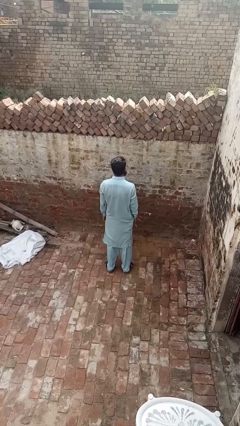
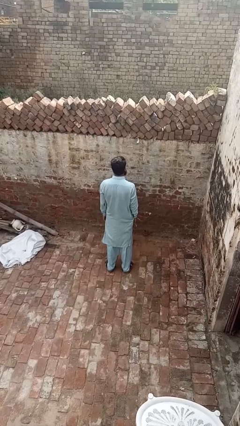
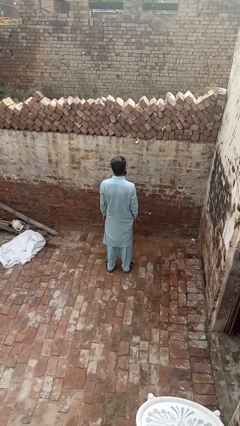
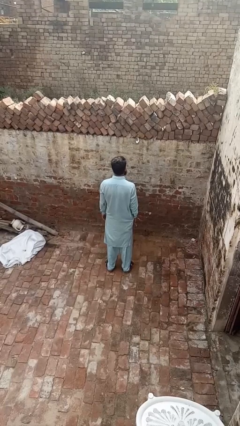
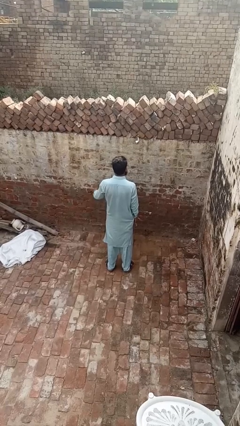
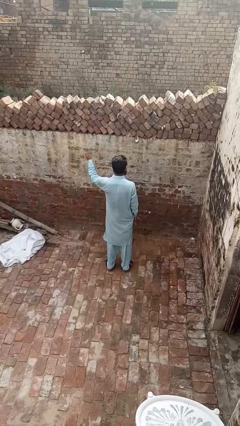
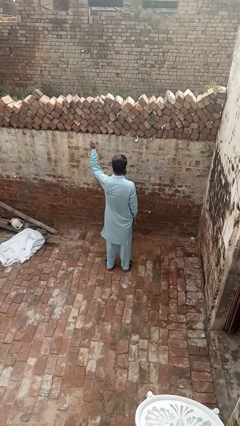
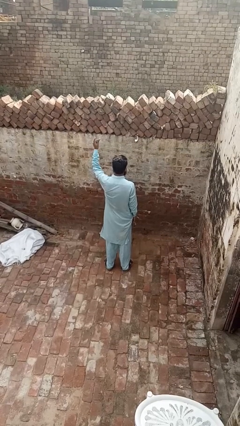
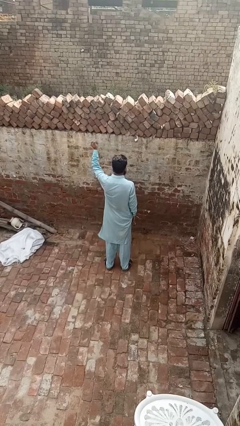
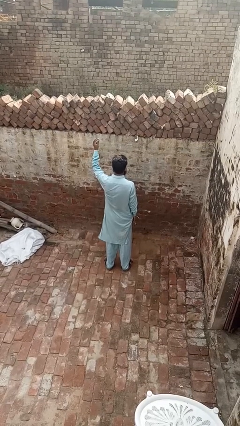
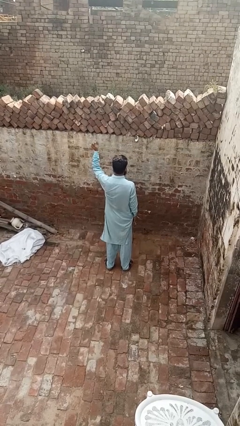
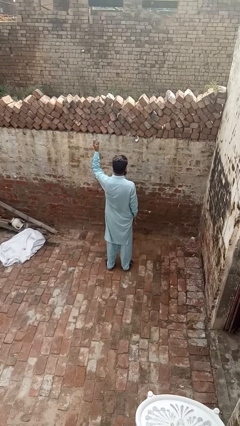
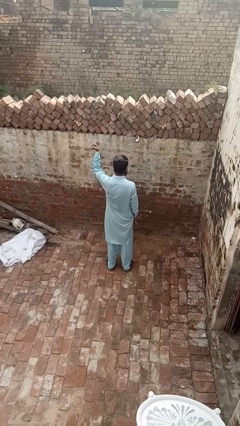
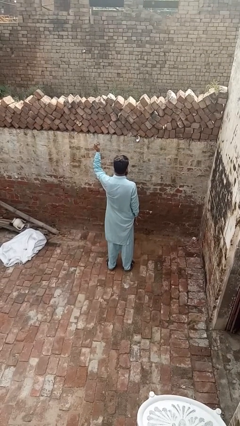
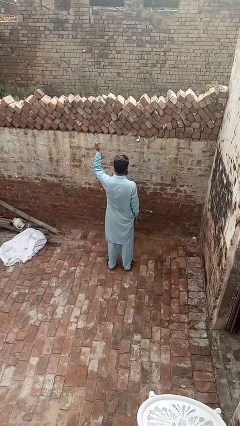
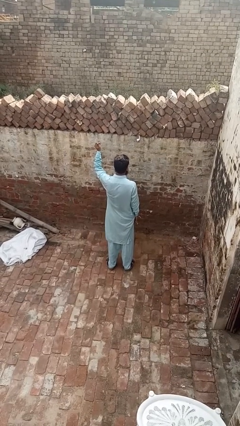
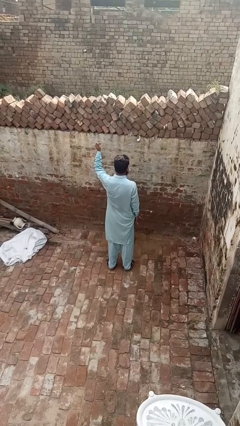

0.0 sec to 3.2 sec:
person snaps fingers

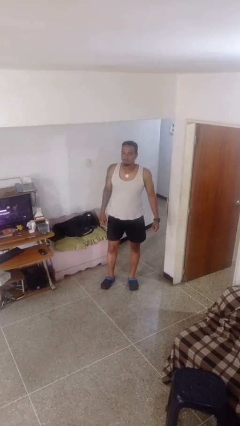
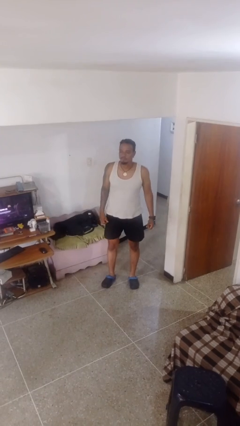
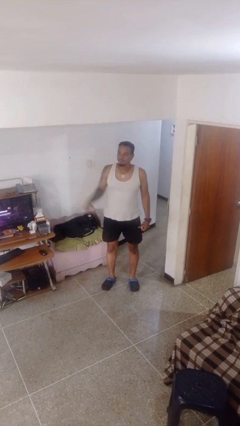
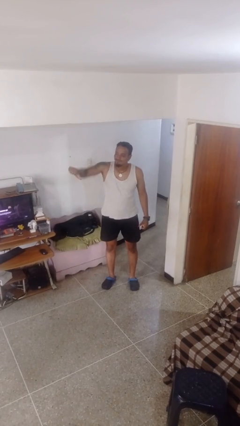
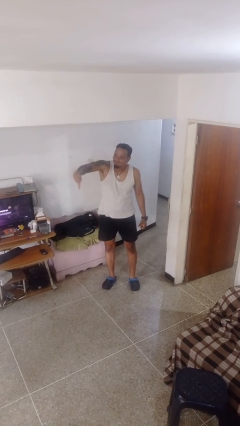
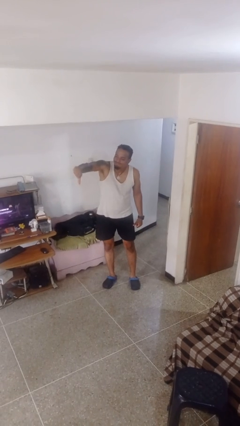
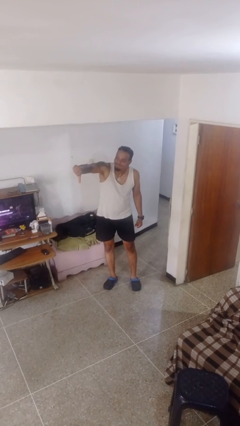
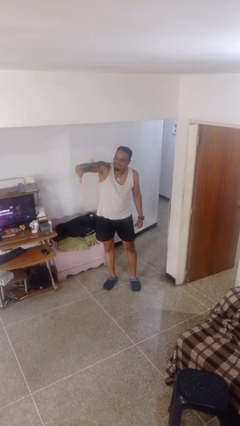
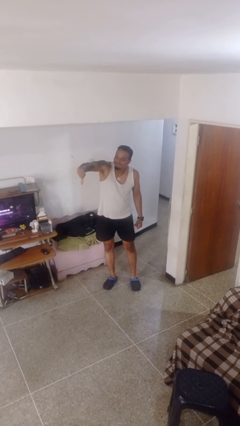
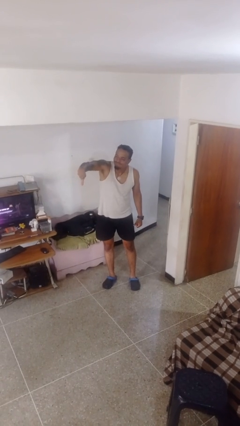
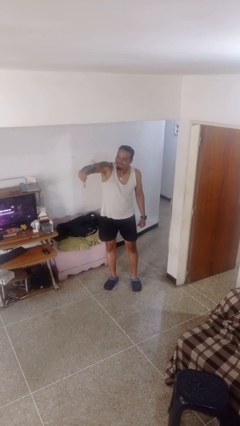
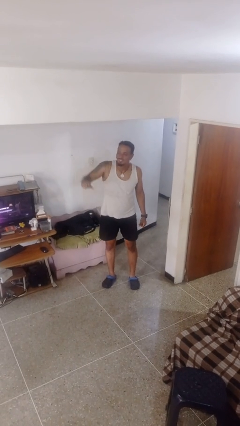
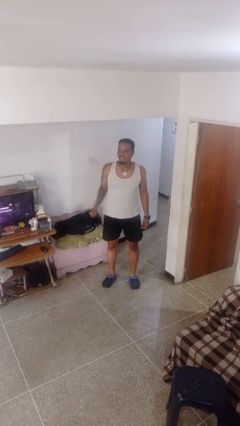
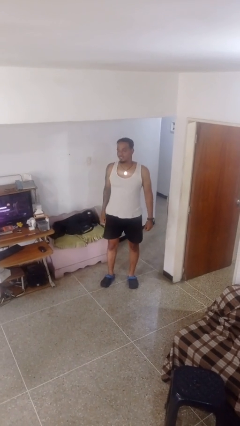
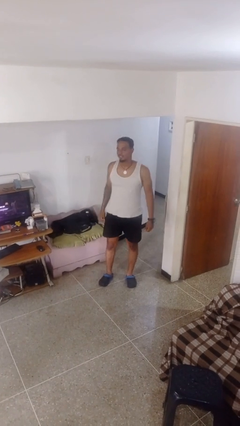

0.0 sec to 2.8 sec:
person gestures thumbs down

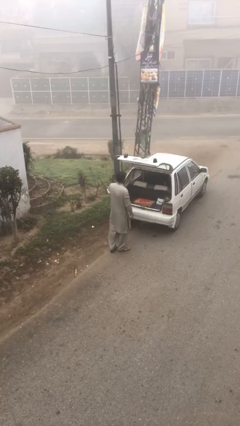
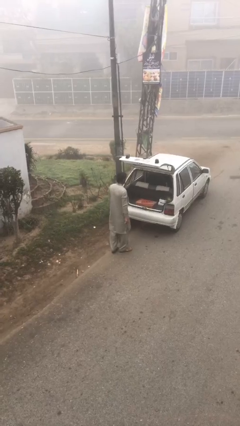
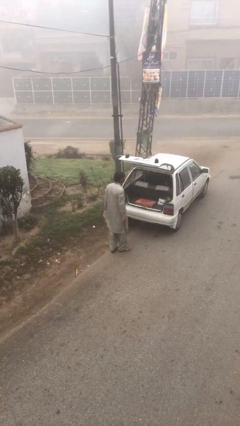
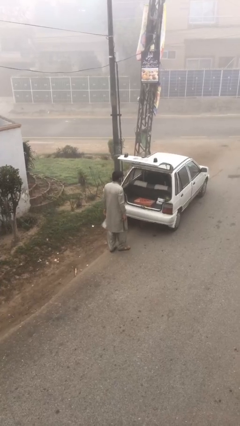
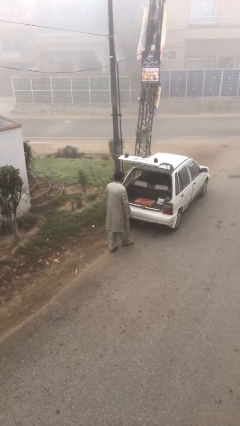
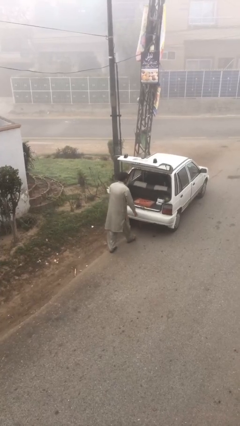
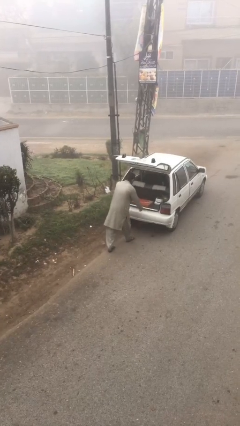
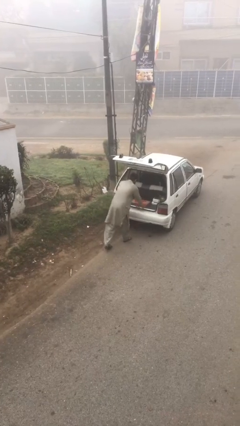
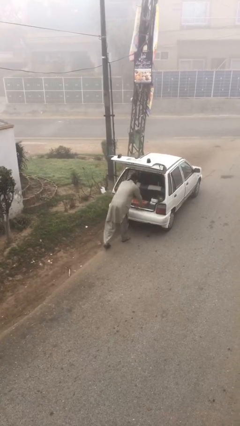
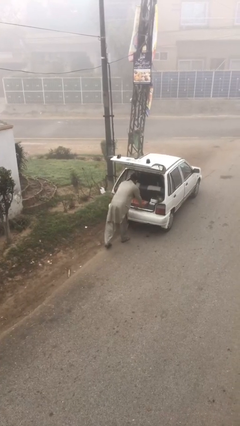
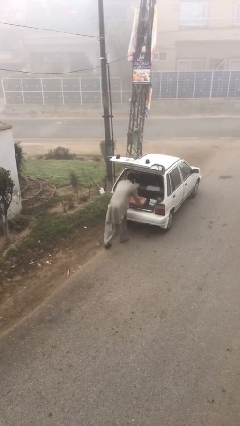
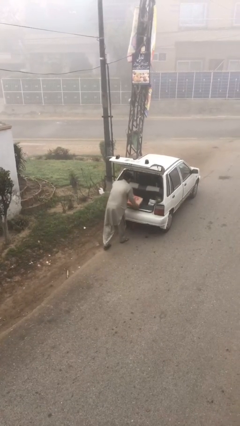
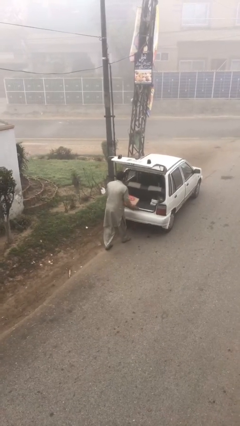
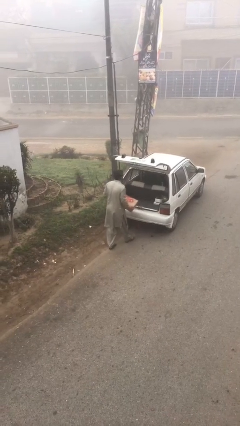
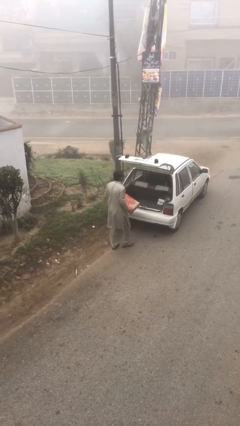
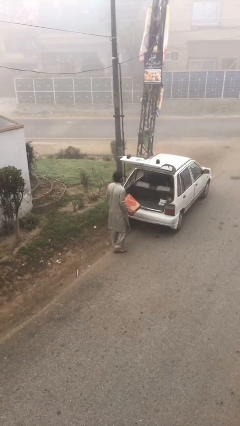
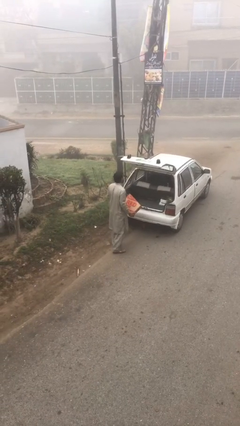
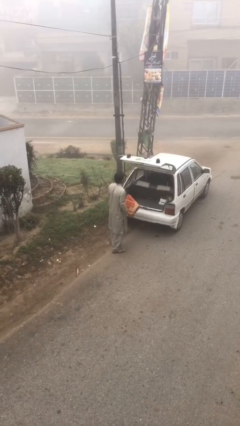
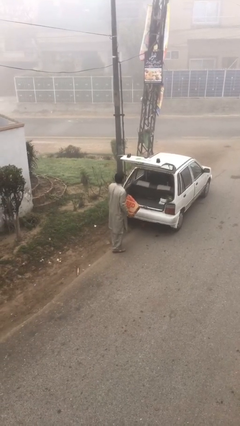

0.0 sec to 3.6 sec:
person unloads car

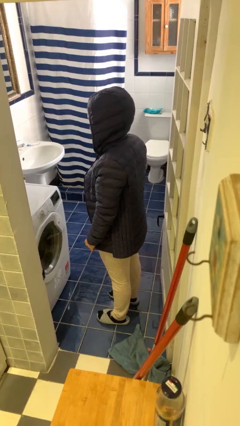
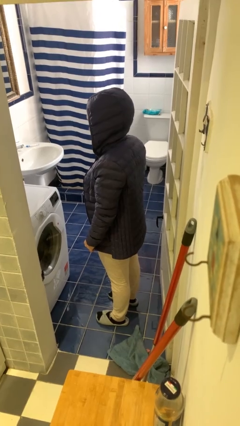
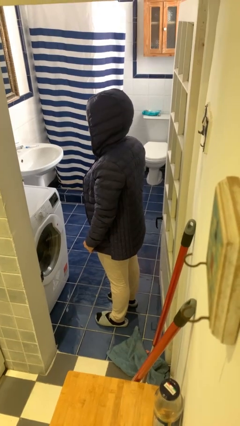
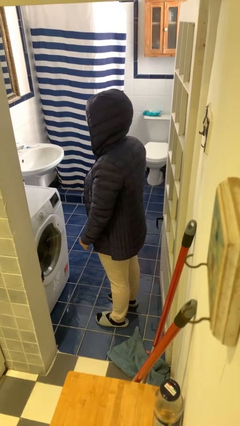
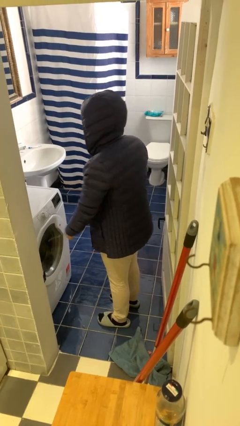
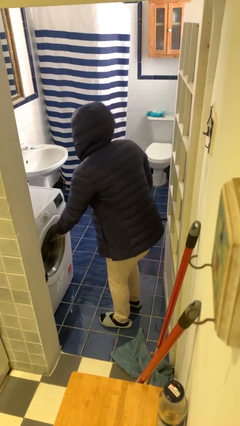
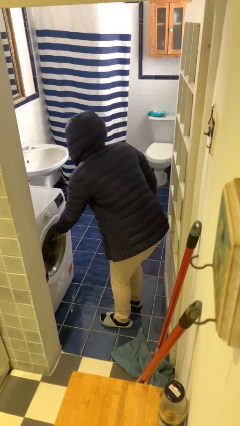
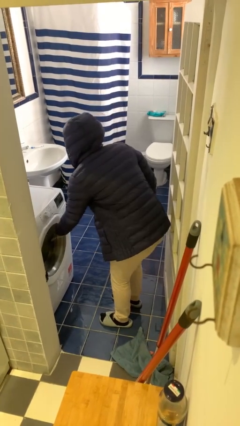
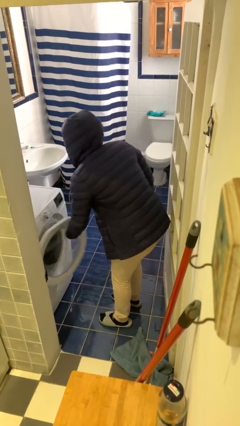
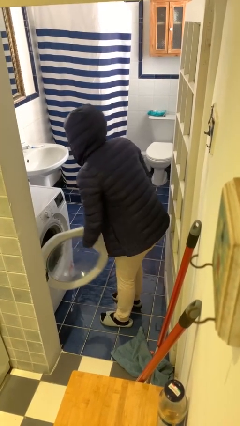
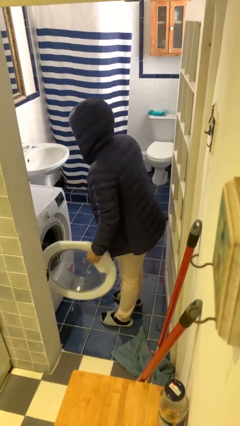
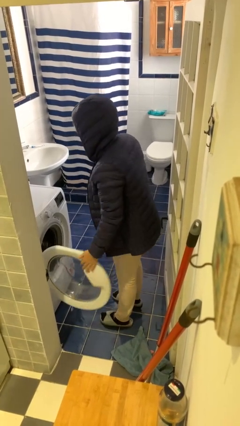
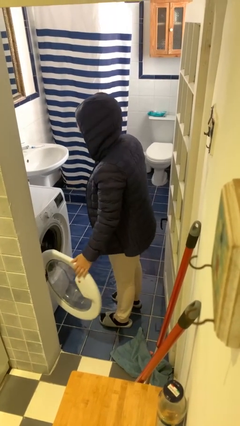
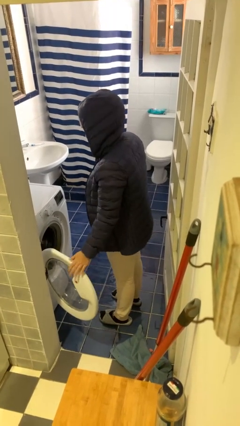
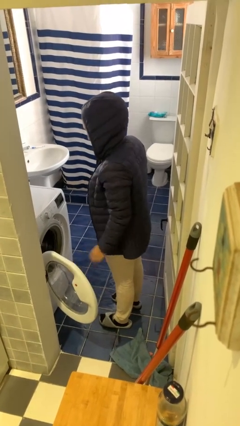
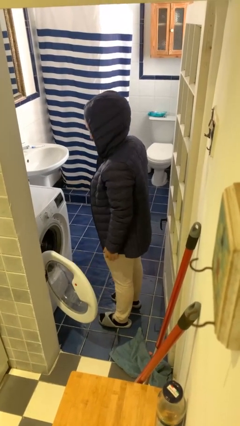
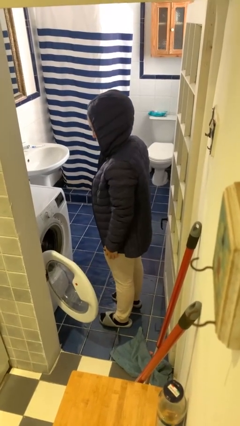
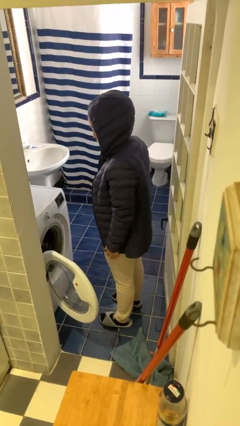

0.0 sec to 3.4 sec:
person opens clothes washer

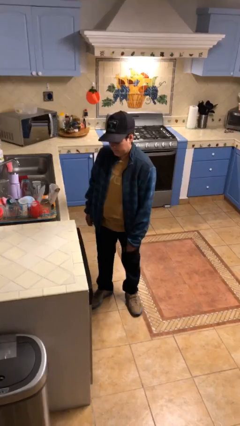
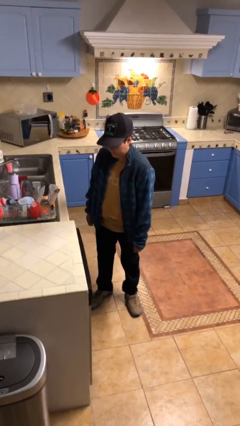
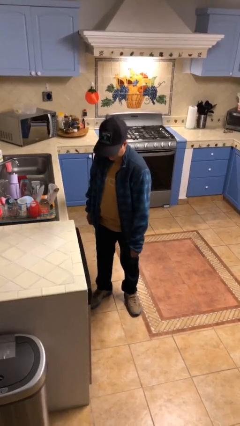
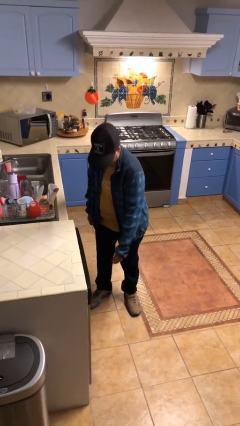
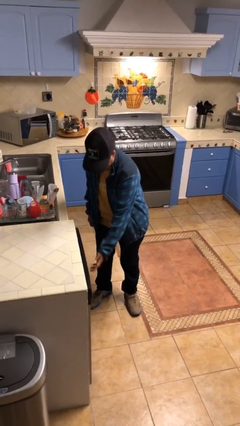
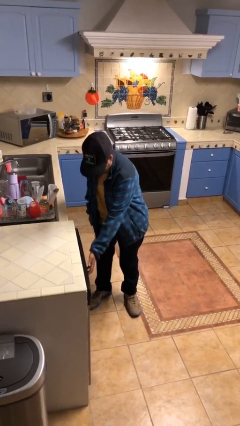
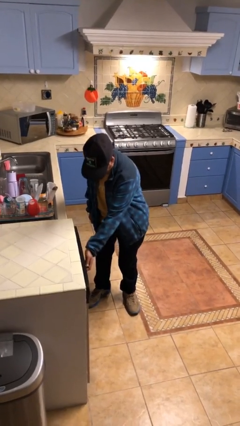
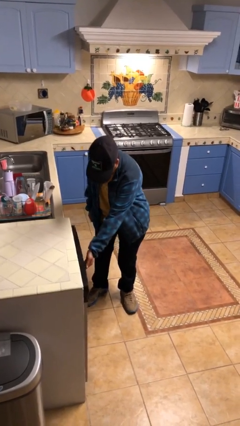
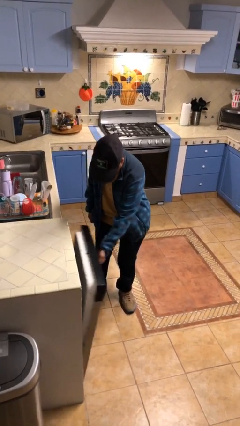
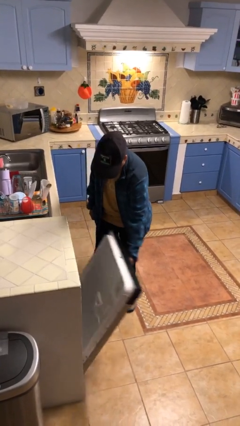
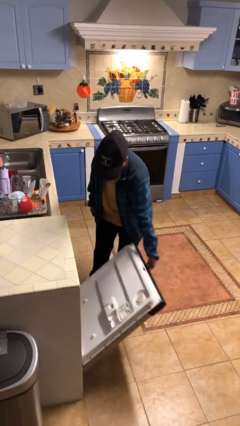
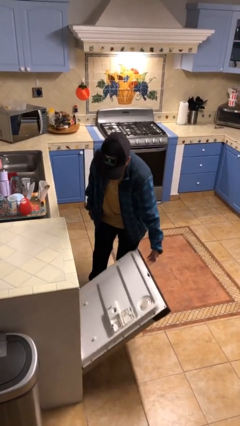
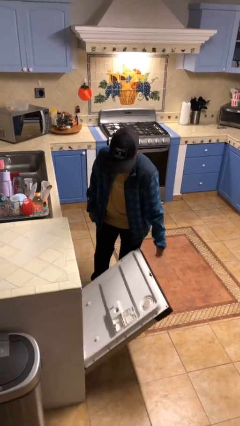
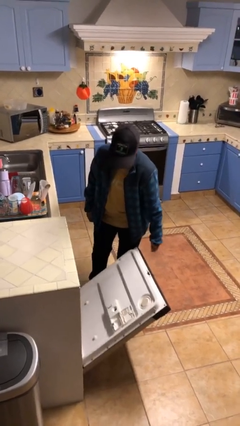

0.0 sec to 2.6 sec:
person opens dishwasher

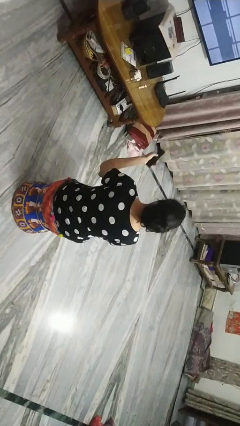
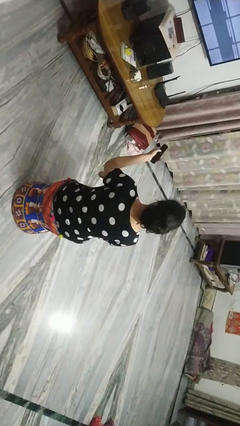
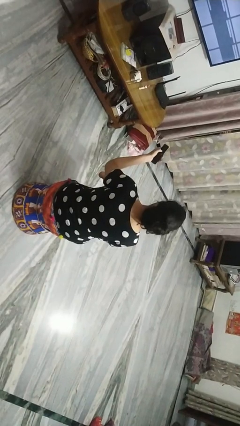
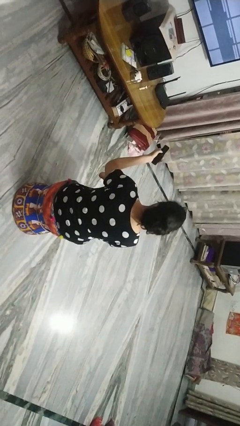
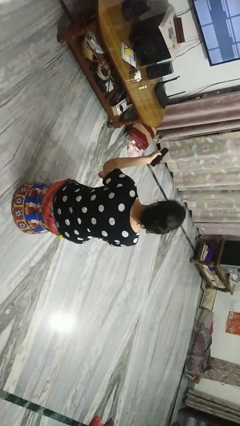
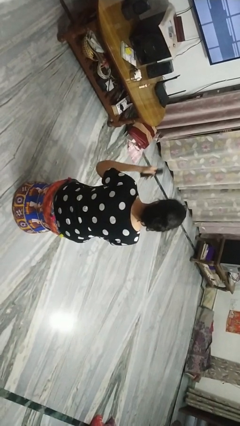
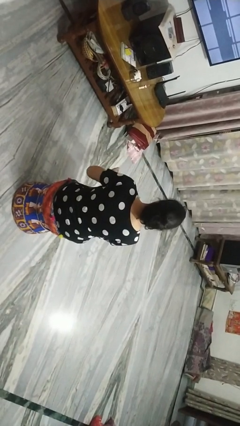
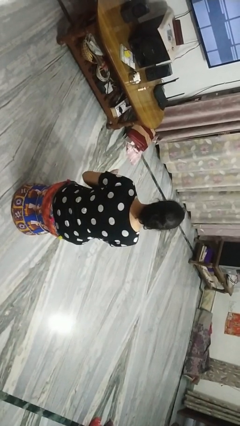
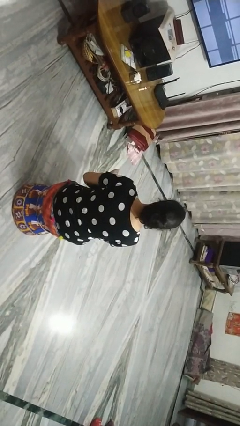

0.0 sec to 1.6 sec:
person uses television remote

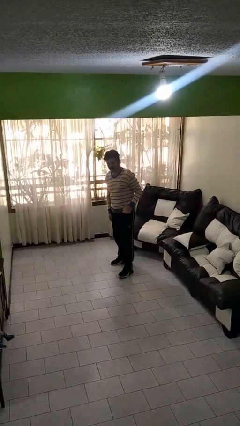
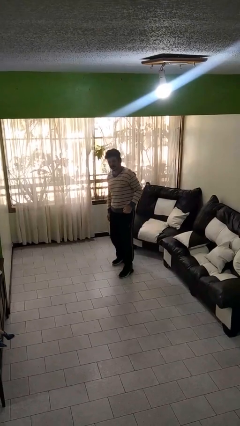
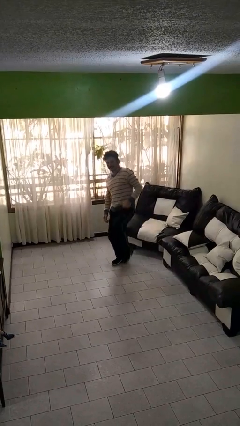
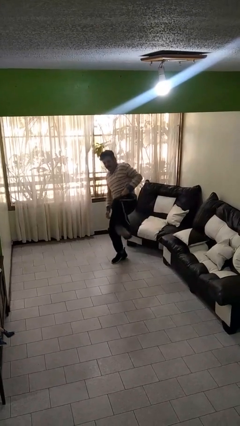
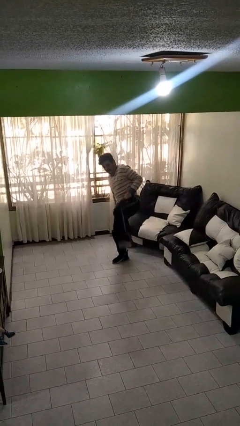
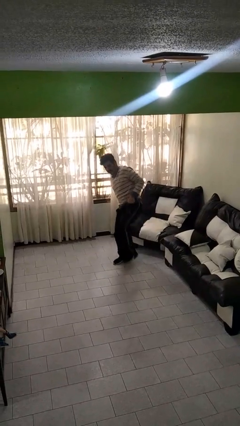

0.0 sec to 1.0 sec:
person karate kicks
